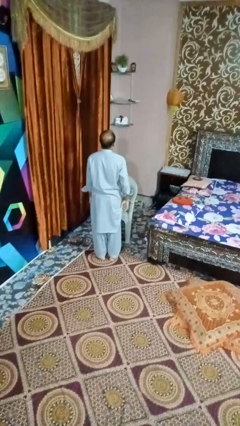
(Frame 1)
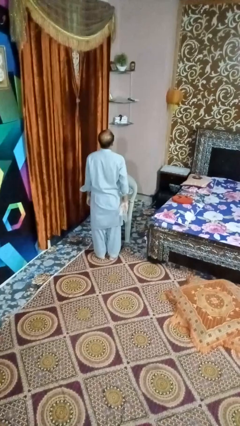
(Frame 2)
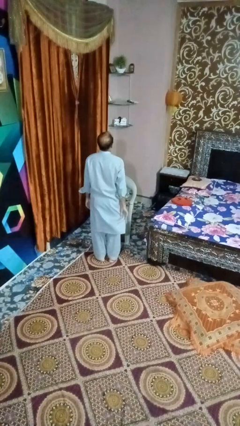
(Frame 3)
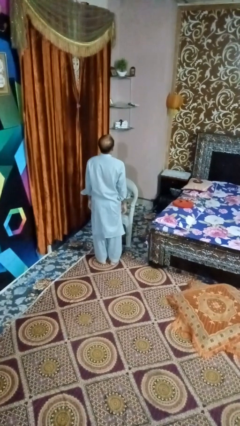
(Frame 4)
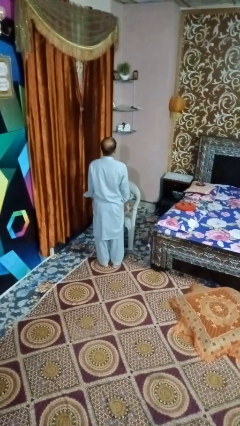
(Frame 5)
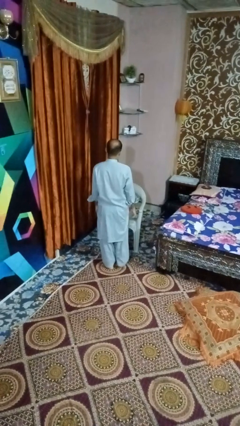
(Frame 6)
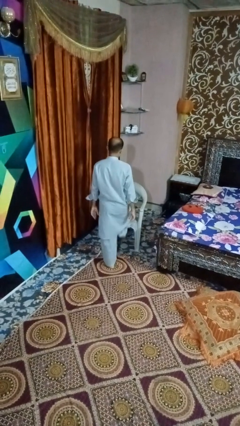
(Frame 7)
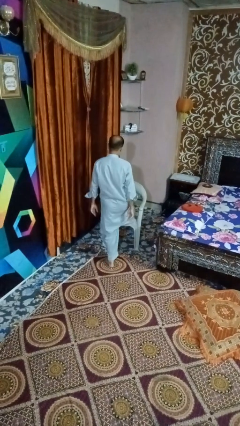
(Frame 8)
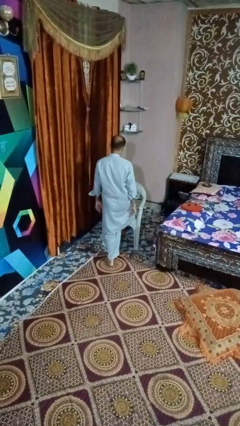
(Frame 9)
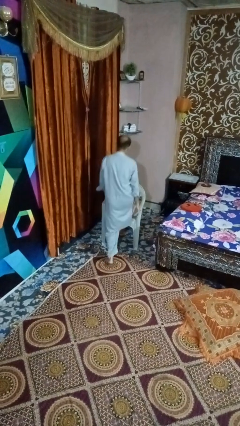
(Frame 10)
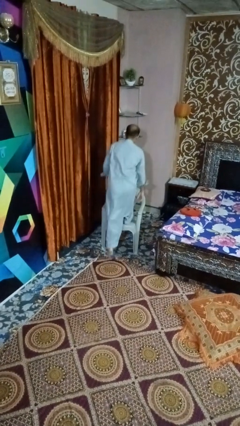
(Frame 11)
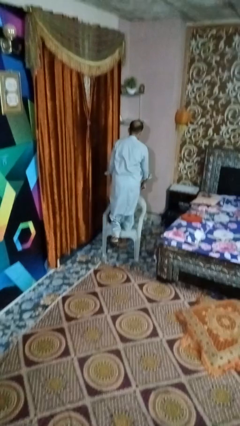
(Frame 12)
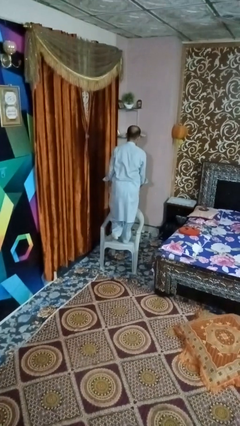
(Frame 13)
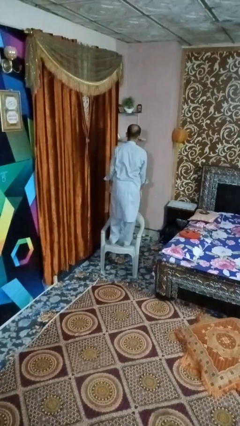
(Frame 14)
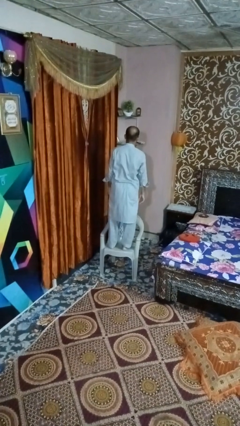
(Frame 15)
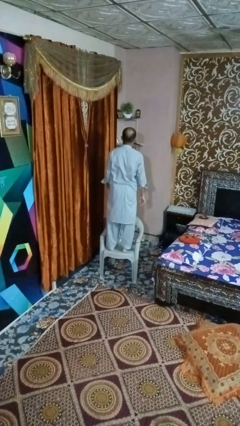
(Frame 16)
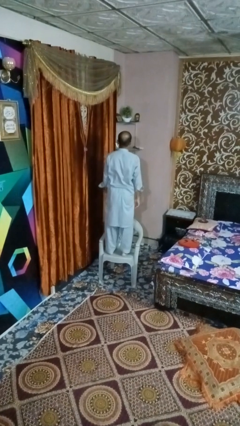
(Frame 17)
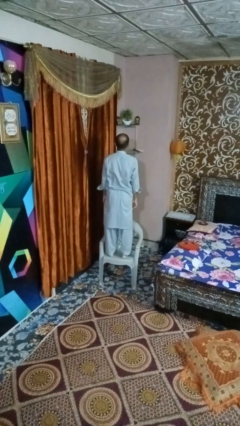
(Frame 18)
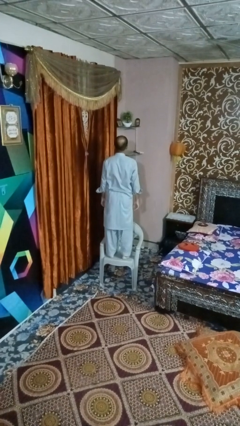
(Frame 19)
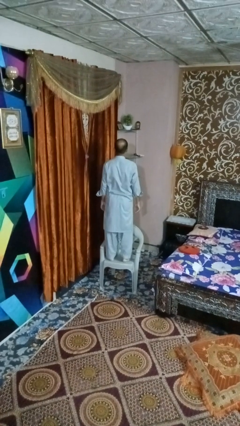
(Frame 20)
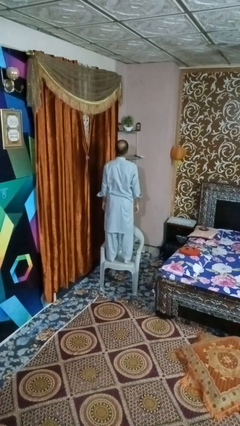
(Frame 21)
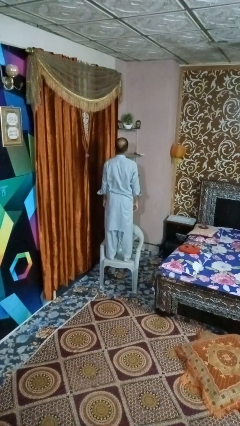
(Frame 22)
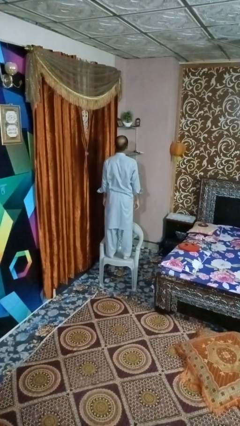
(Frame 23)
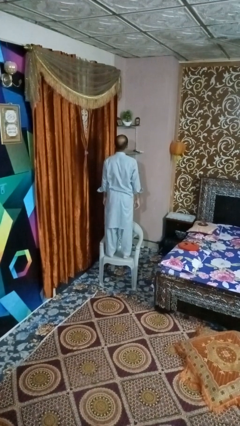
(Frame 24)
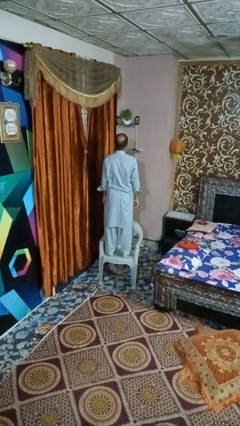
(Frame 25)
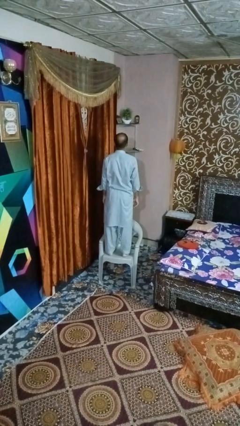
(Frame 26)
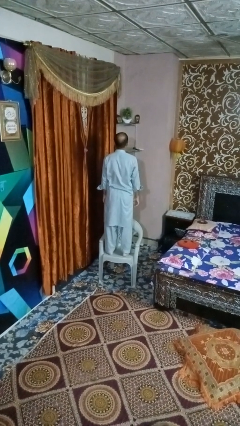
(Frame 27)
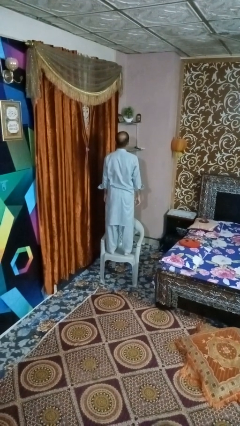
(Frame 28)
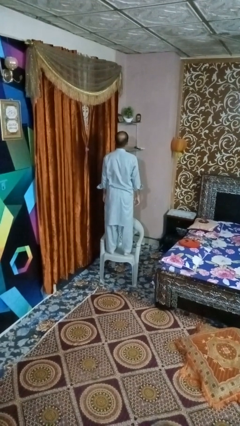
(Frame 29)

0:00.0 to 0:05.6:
person climbs on chair

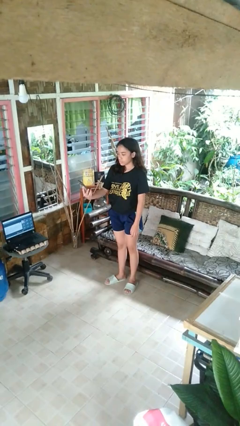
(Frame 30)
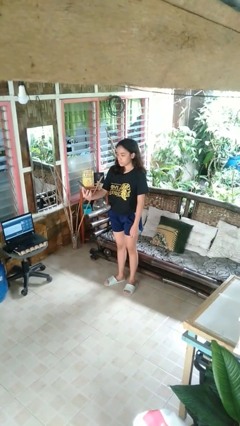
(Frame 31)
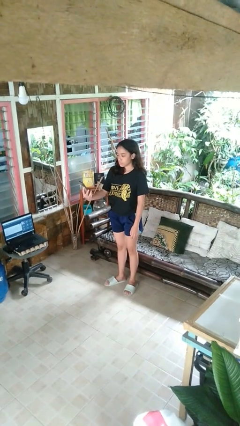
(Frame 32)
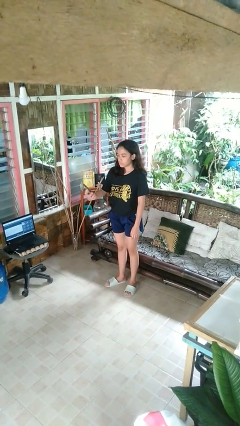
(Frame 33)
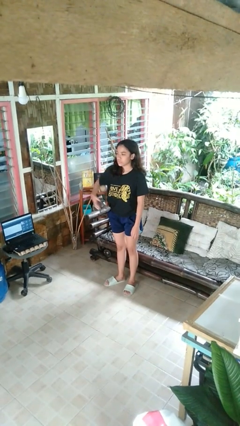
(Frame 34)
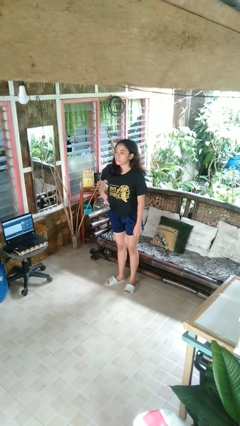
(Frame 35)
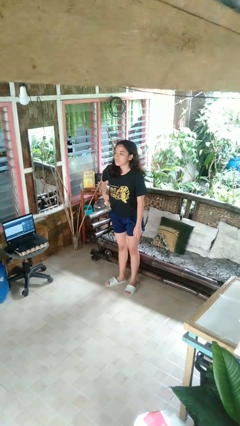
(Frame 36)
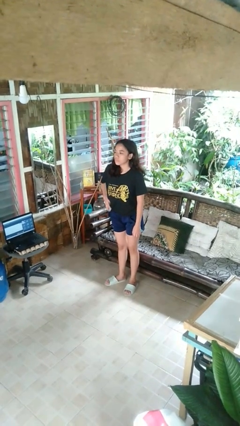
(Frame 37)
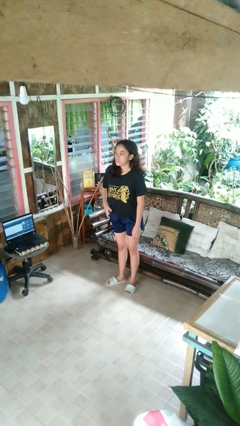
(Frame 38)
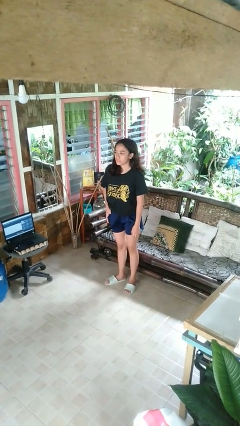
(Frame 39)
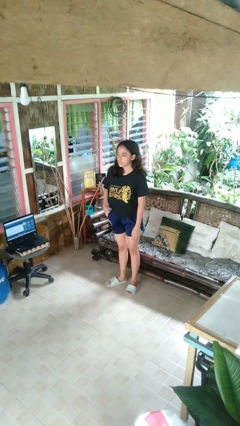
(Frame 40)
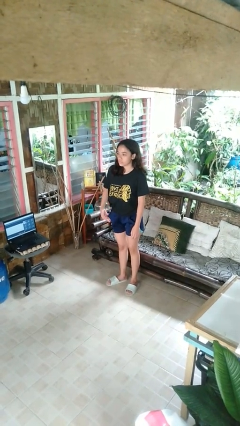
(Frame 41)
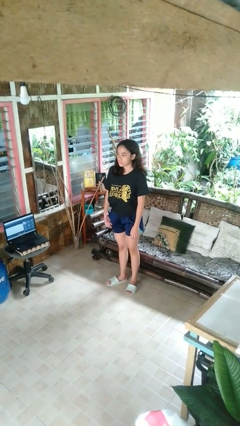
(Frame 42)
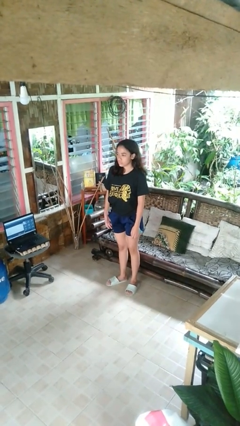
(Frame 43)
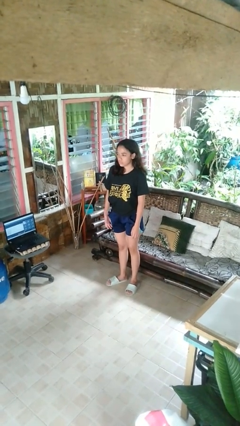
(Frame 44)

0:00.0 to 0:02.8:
person puts phone into pocket

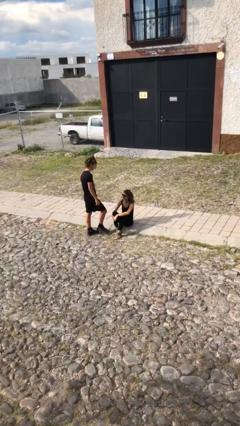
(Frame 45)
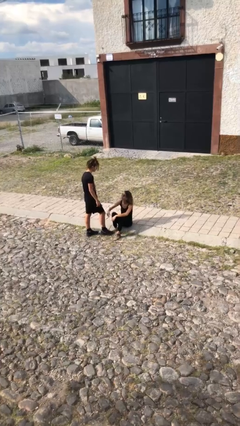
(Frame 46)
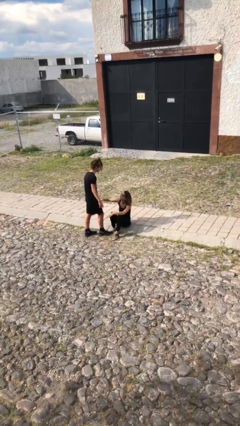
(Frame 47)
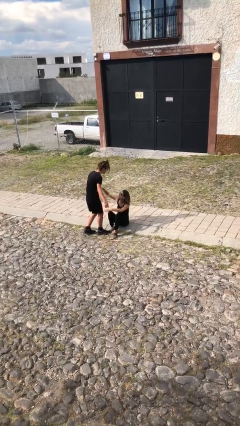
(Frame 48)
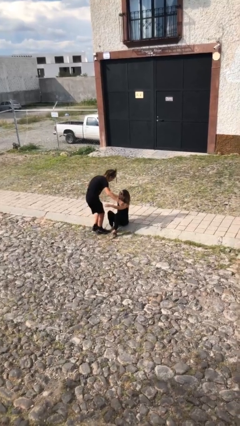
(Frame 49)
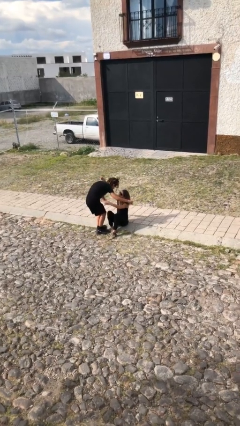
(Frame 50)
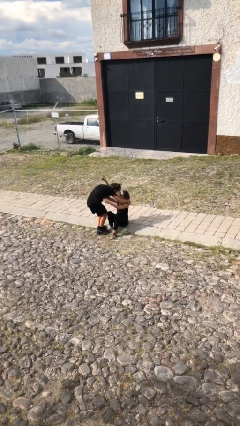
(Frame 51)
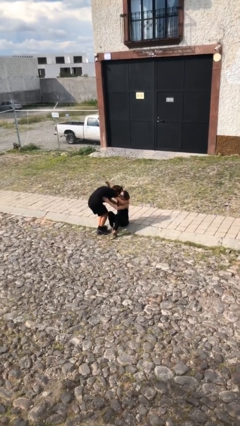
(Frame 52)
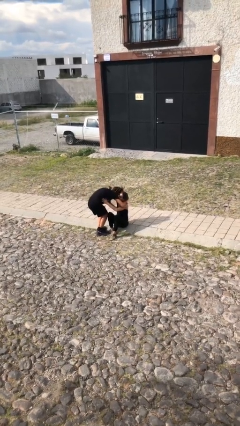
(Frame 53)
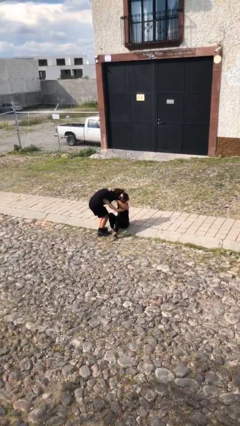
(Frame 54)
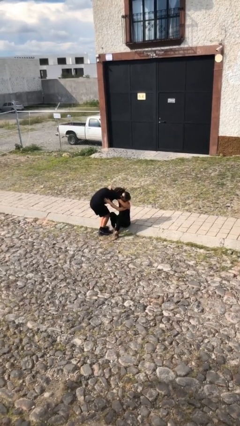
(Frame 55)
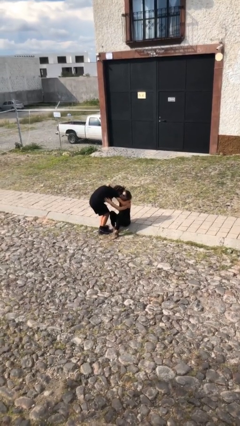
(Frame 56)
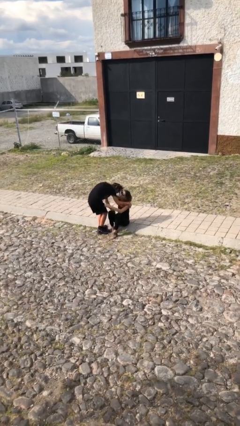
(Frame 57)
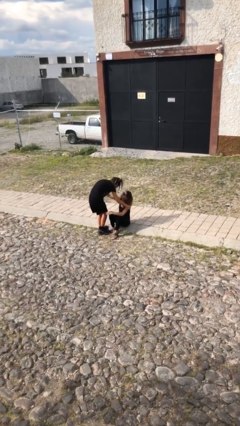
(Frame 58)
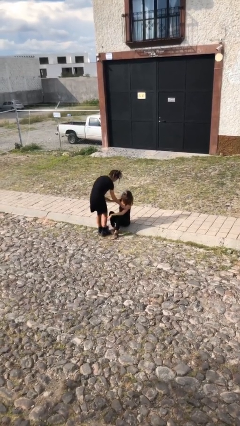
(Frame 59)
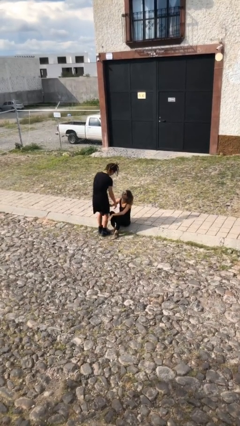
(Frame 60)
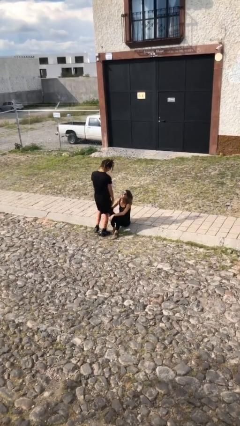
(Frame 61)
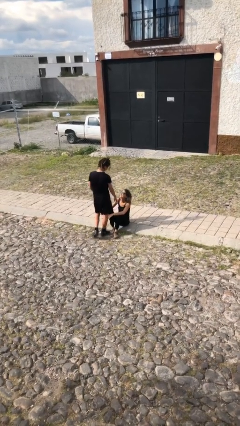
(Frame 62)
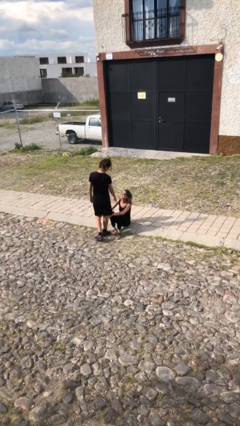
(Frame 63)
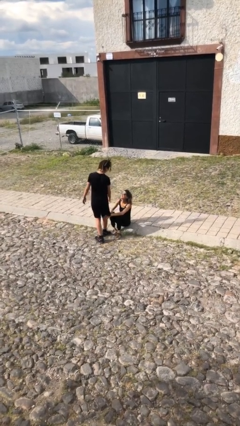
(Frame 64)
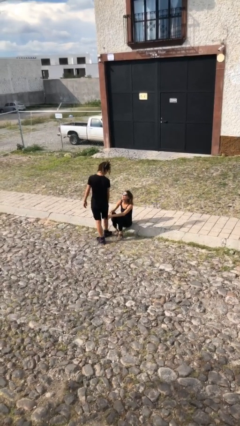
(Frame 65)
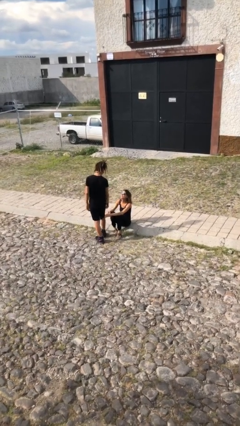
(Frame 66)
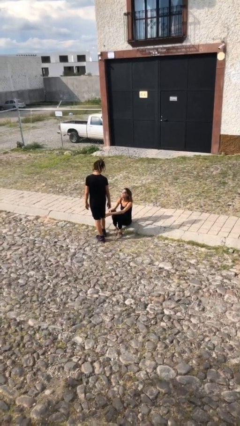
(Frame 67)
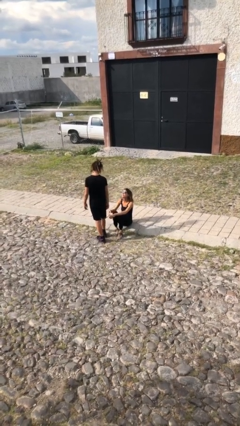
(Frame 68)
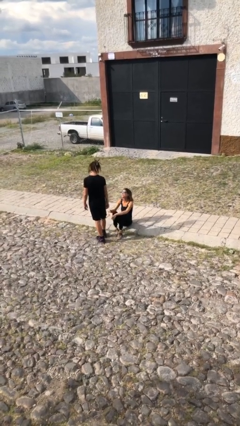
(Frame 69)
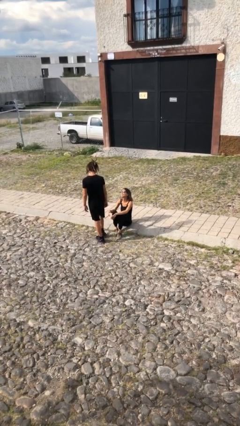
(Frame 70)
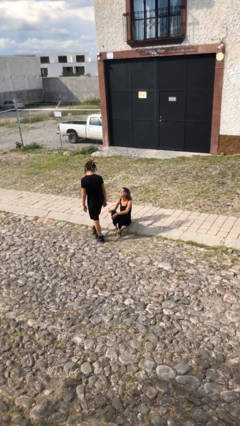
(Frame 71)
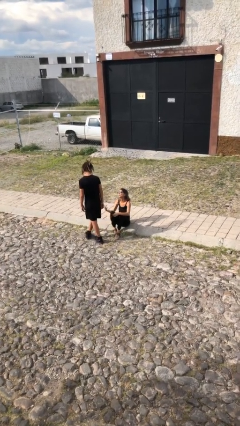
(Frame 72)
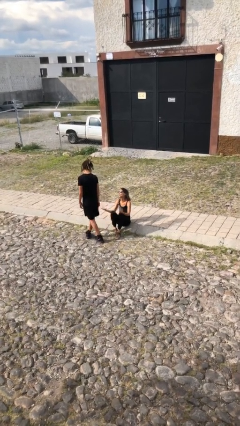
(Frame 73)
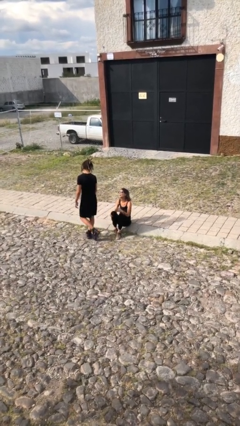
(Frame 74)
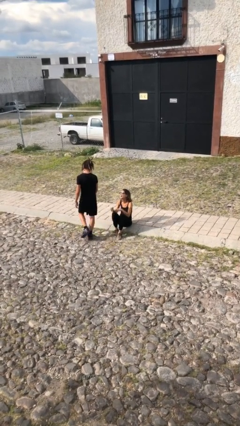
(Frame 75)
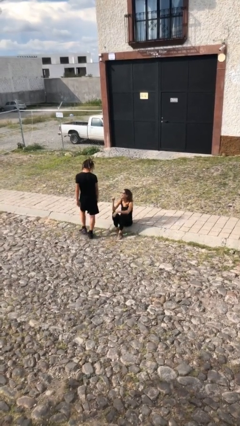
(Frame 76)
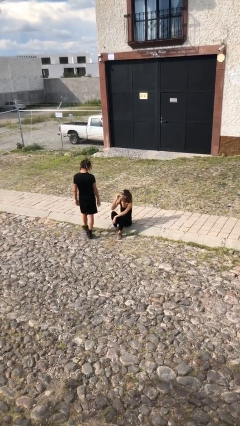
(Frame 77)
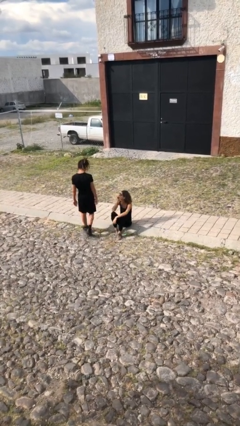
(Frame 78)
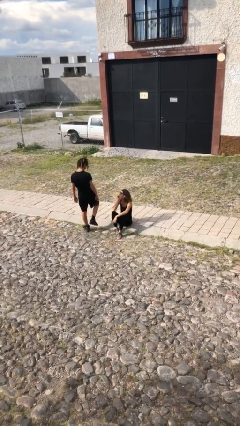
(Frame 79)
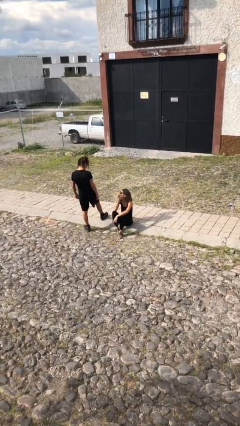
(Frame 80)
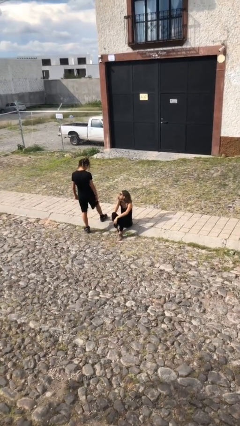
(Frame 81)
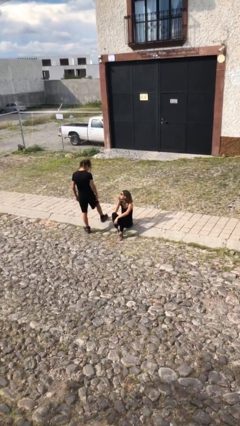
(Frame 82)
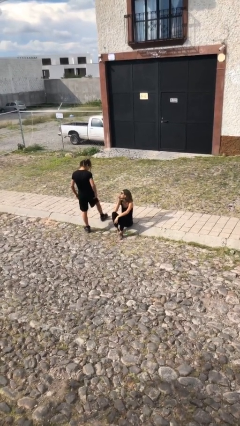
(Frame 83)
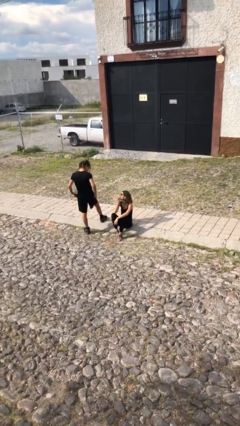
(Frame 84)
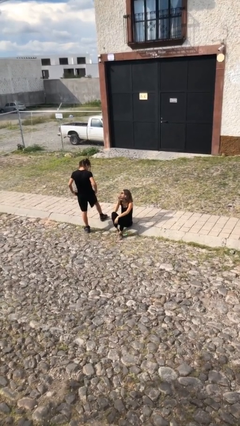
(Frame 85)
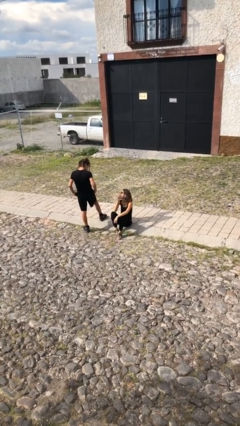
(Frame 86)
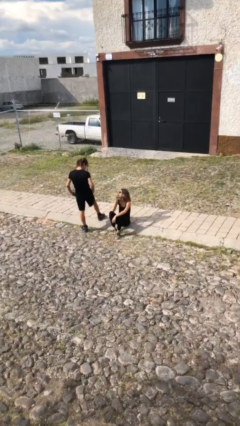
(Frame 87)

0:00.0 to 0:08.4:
person embraces person

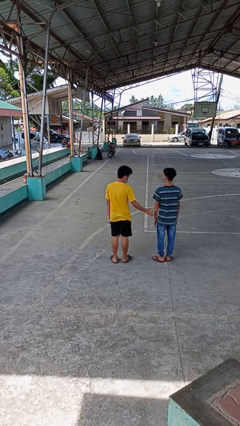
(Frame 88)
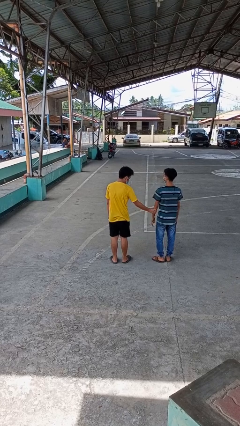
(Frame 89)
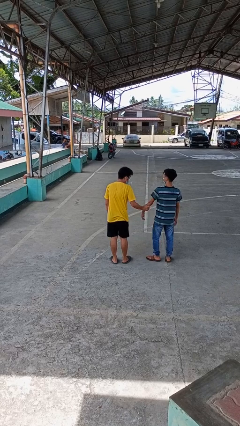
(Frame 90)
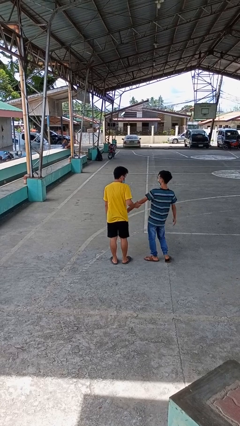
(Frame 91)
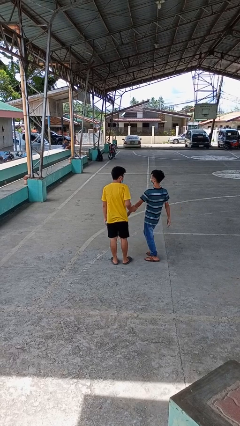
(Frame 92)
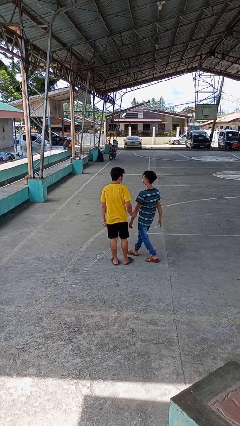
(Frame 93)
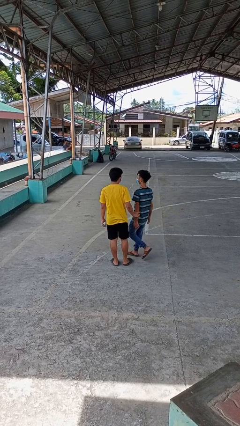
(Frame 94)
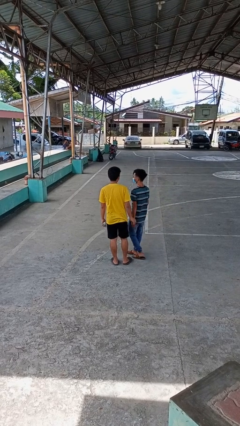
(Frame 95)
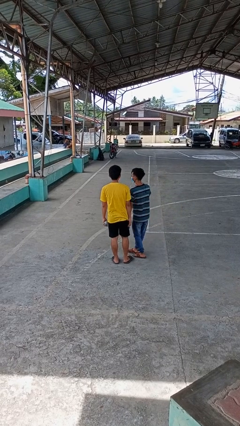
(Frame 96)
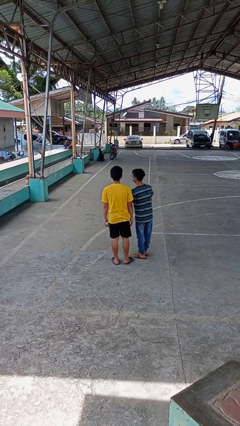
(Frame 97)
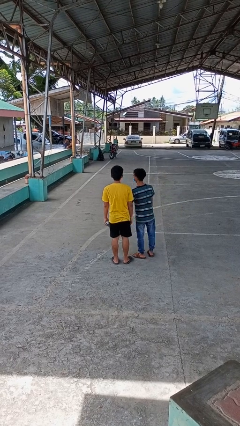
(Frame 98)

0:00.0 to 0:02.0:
person grabs person by forearm
